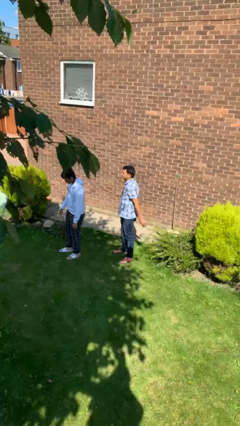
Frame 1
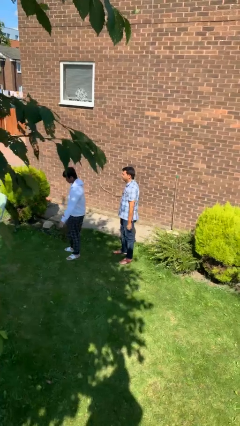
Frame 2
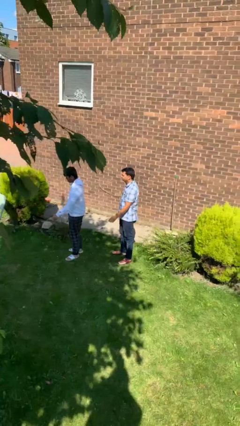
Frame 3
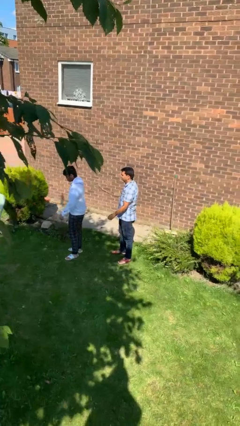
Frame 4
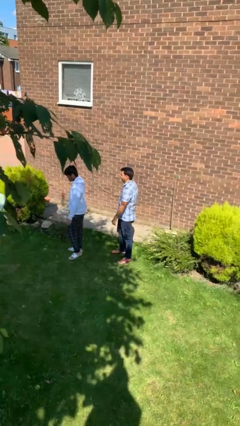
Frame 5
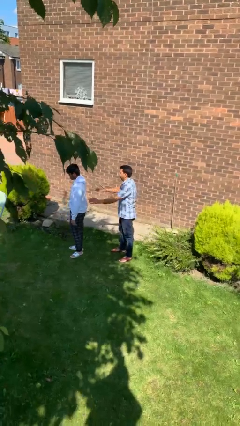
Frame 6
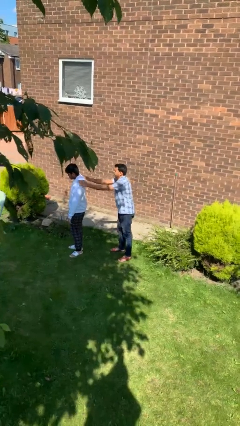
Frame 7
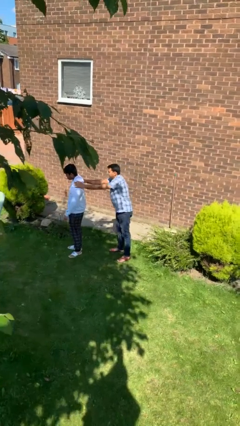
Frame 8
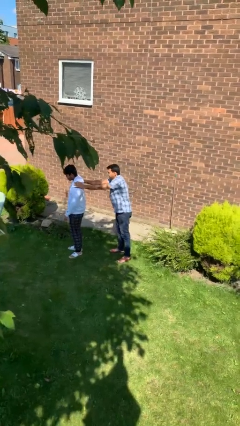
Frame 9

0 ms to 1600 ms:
person grabs person by shoulder

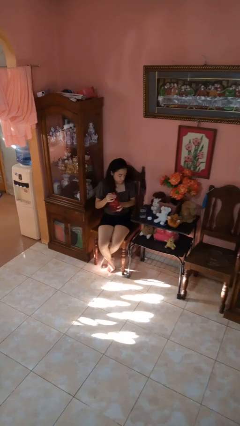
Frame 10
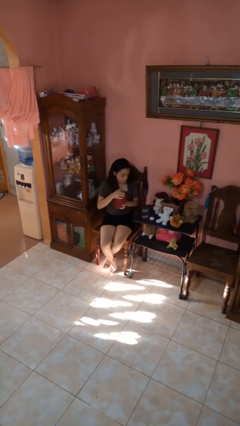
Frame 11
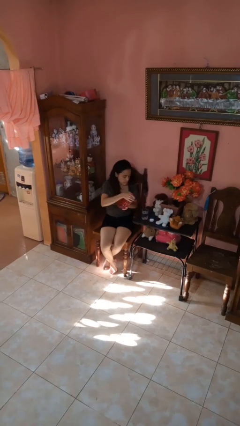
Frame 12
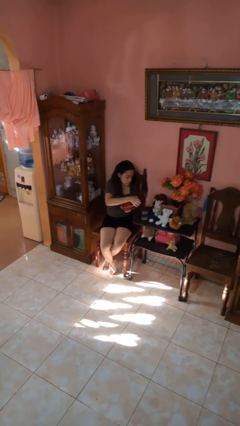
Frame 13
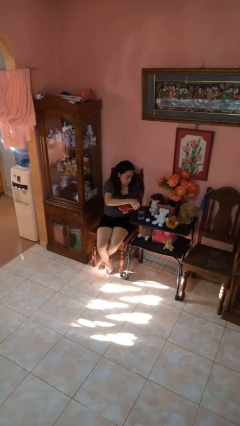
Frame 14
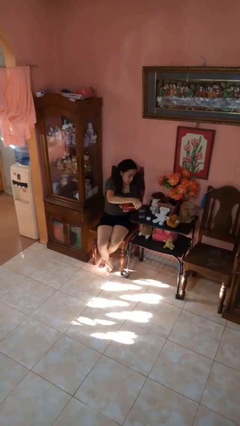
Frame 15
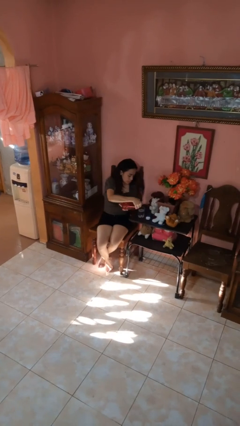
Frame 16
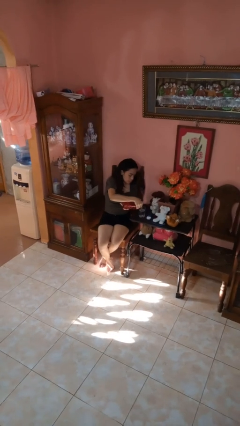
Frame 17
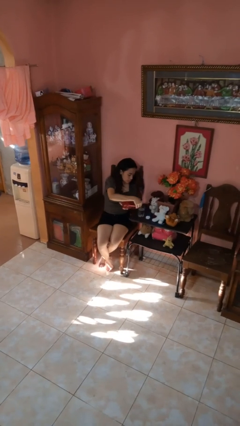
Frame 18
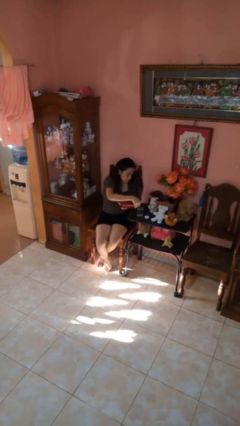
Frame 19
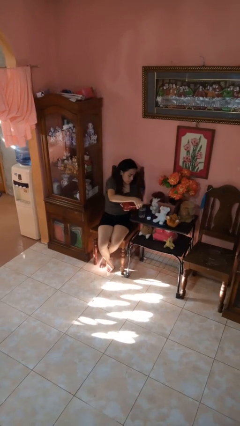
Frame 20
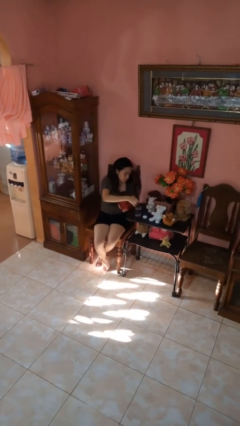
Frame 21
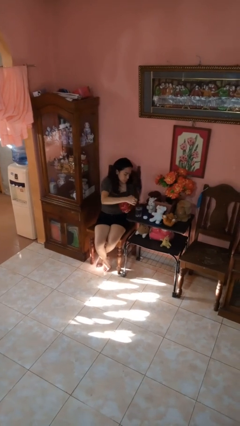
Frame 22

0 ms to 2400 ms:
person pours liquid into cup

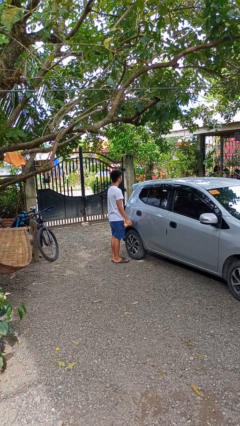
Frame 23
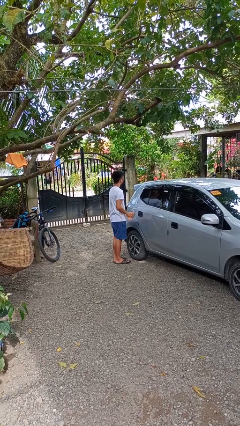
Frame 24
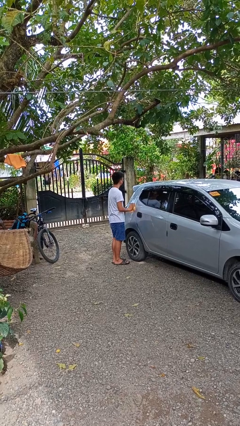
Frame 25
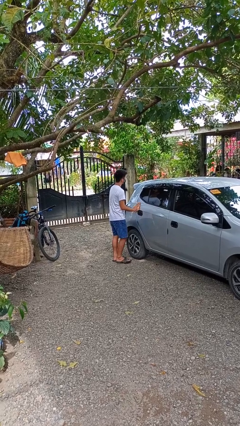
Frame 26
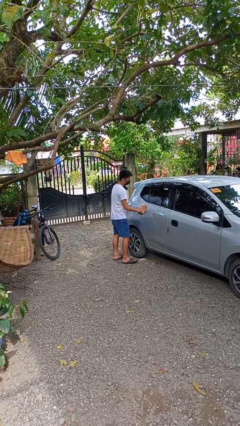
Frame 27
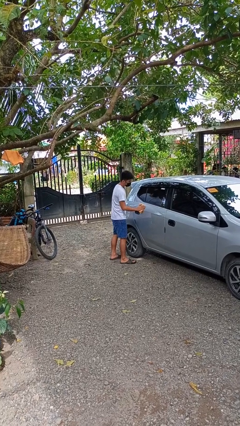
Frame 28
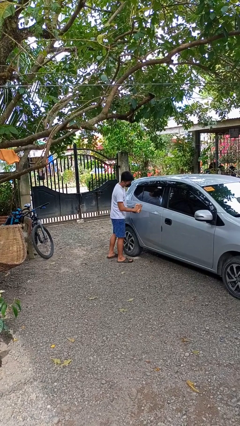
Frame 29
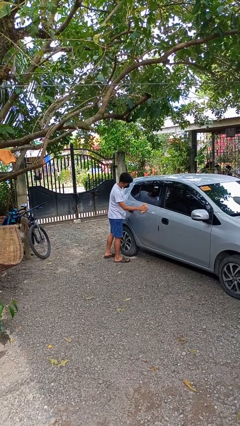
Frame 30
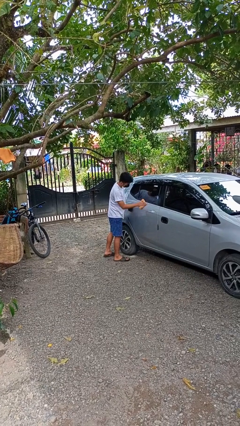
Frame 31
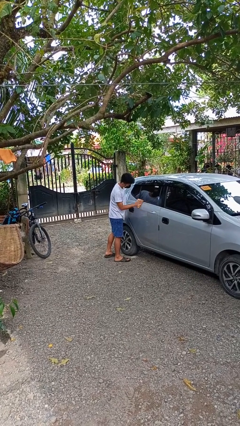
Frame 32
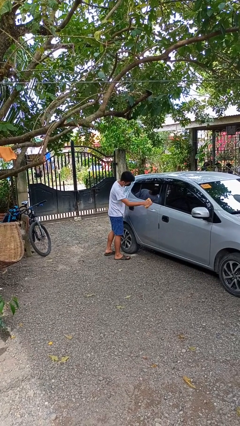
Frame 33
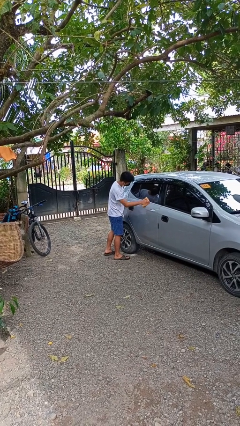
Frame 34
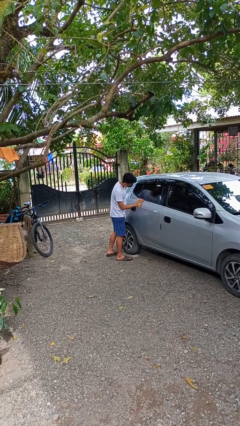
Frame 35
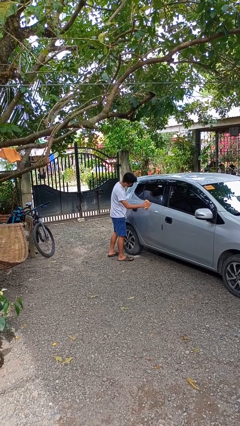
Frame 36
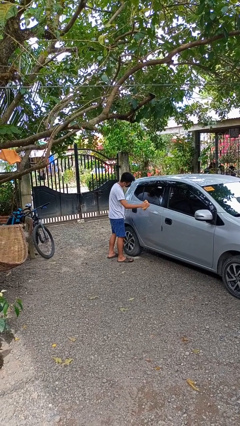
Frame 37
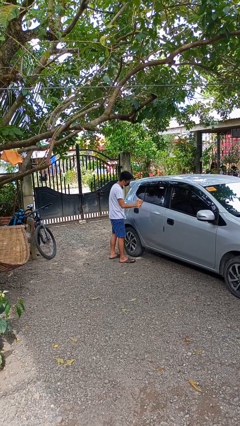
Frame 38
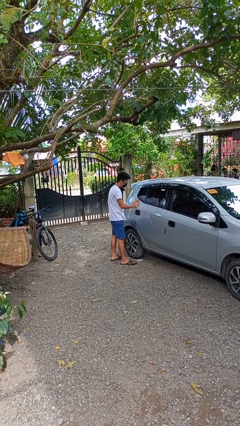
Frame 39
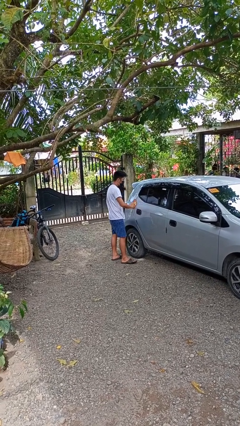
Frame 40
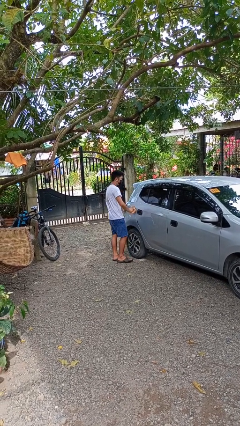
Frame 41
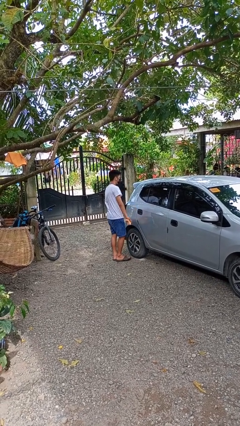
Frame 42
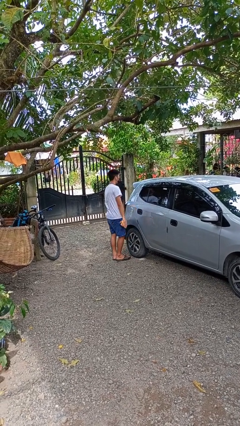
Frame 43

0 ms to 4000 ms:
person polishes car with rag

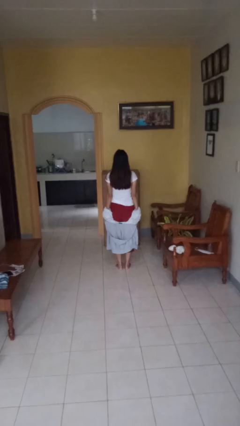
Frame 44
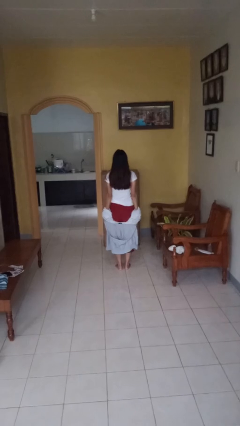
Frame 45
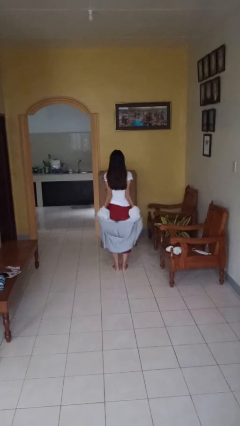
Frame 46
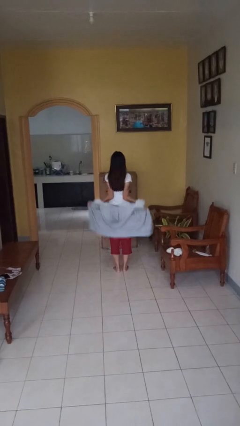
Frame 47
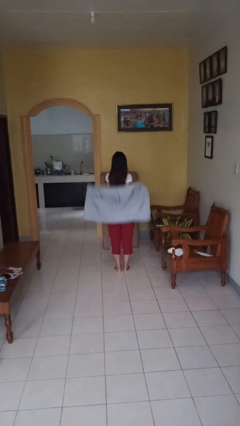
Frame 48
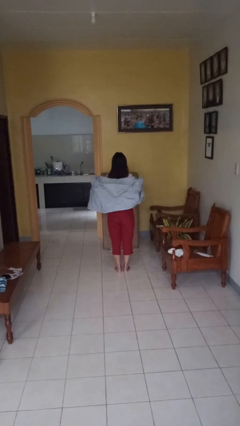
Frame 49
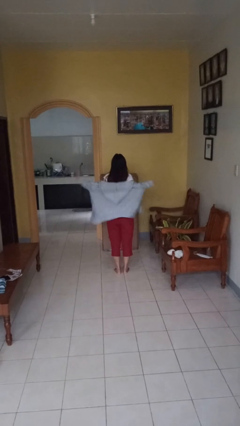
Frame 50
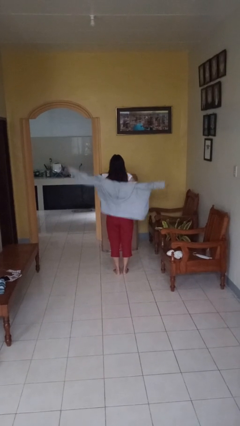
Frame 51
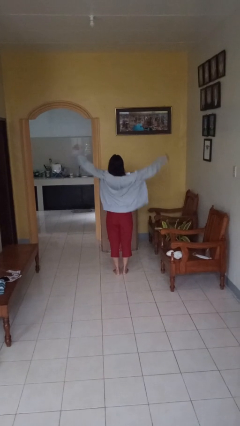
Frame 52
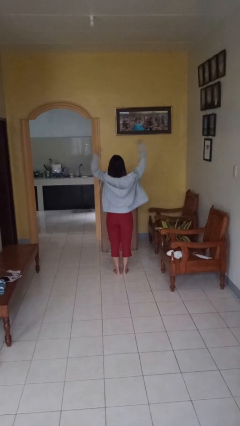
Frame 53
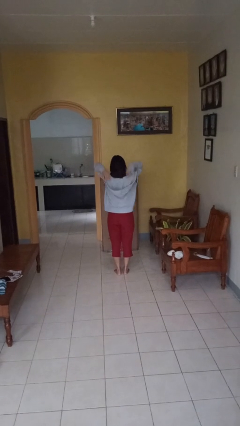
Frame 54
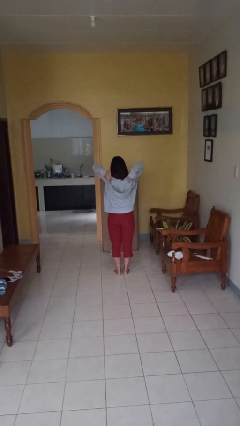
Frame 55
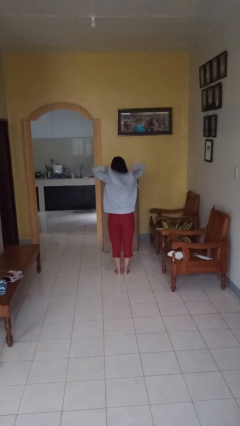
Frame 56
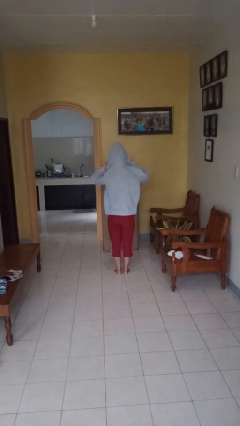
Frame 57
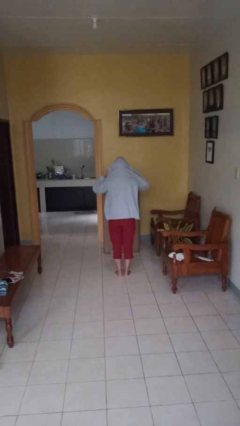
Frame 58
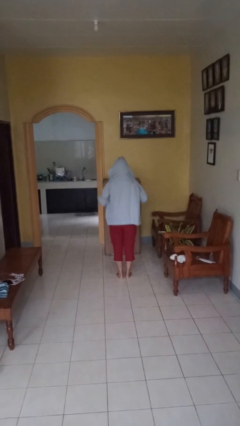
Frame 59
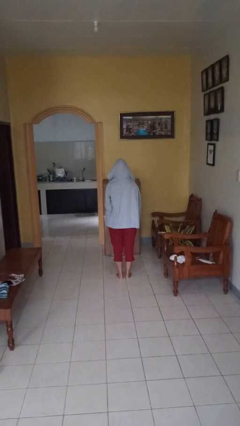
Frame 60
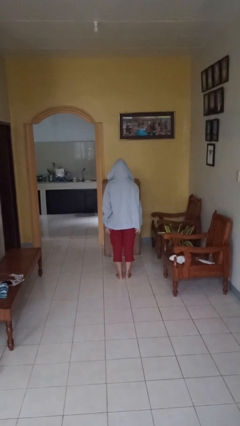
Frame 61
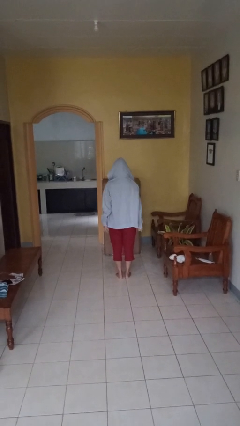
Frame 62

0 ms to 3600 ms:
person puts on hoodie

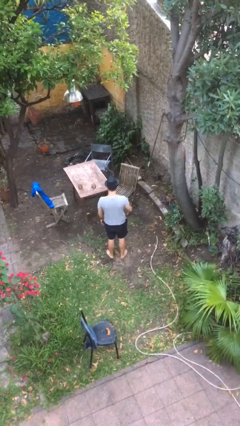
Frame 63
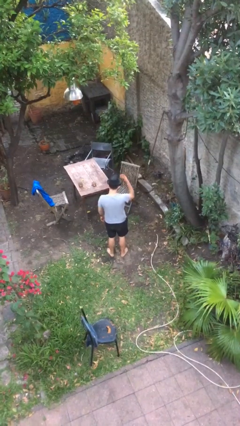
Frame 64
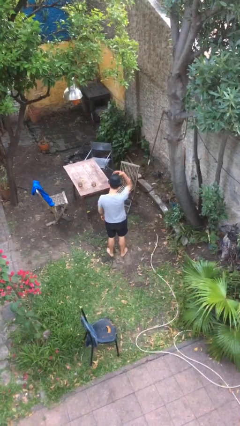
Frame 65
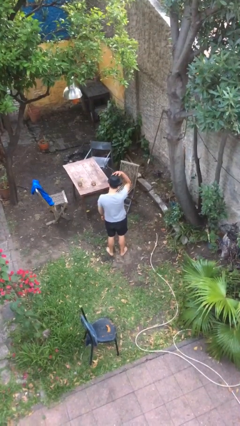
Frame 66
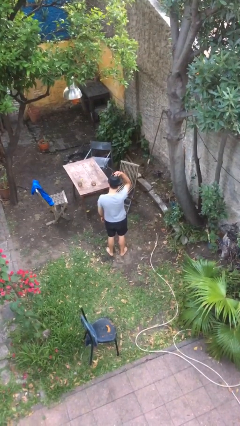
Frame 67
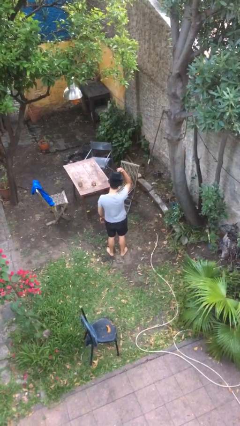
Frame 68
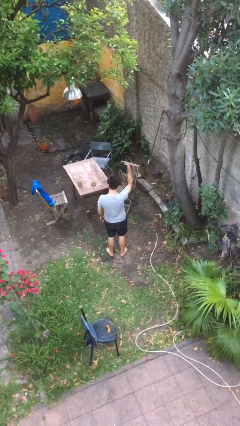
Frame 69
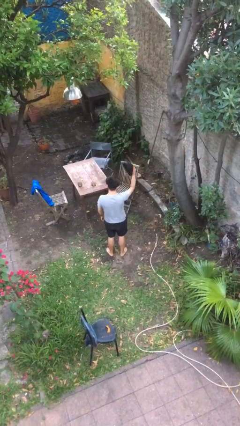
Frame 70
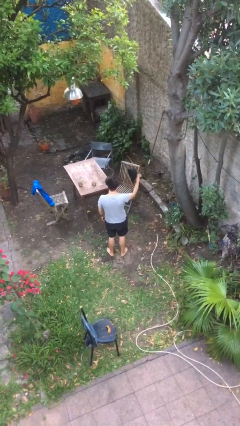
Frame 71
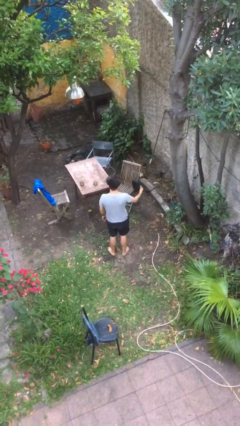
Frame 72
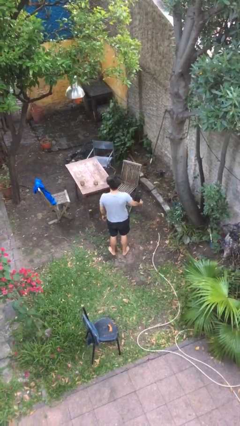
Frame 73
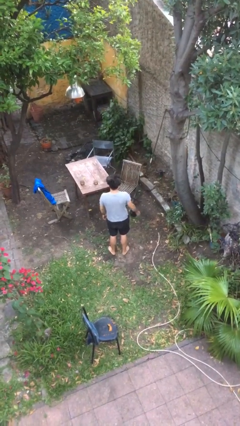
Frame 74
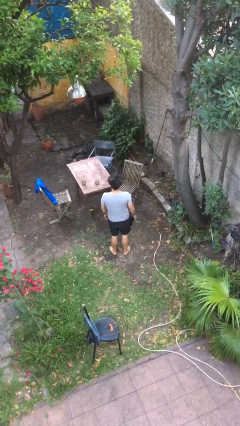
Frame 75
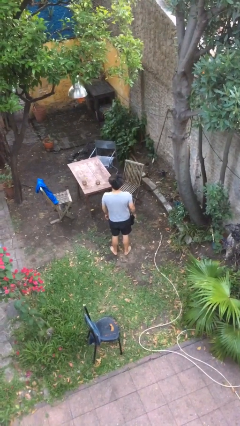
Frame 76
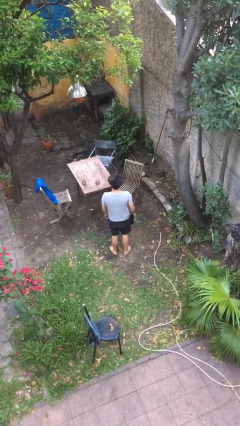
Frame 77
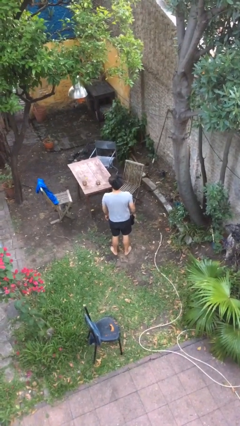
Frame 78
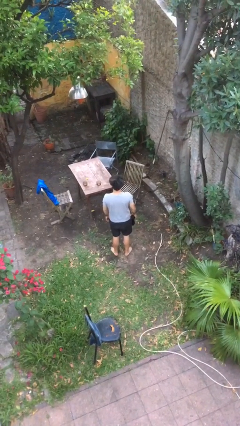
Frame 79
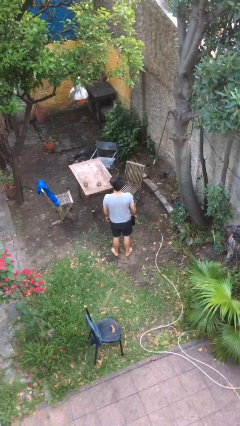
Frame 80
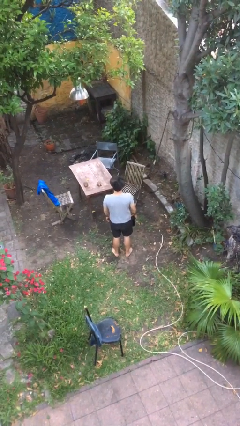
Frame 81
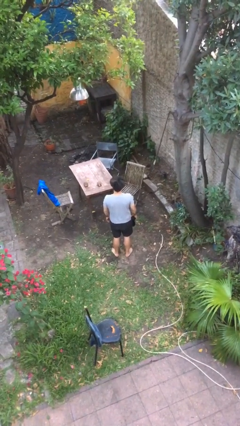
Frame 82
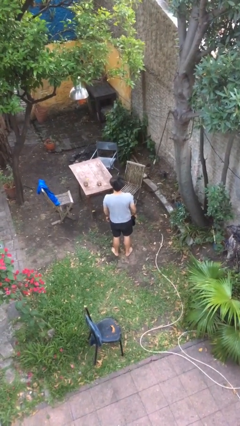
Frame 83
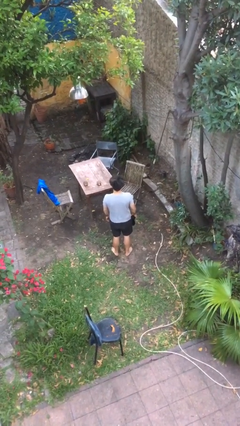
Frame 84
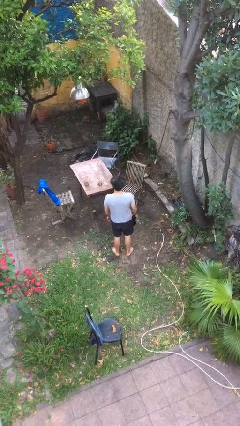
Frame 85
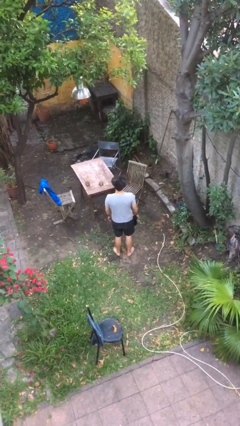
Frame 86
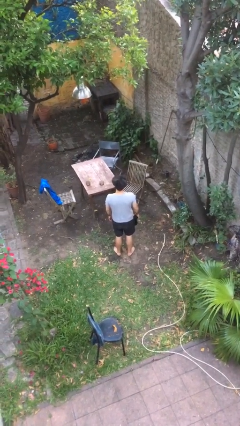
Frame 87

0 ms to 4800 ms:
person takes off hat

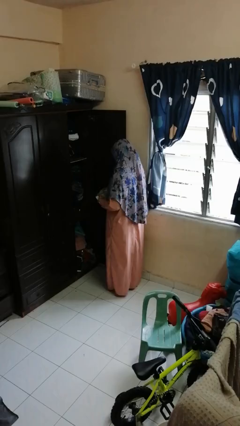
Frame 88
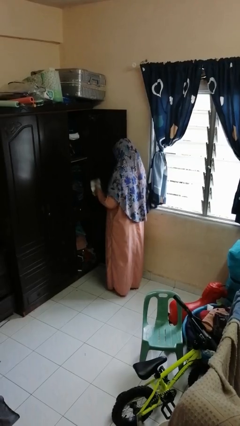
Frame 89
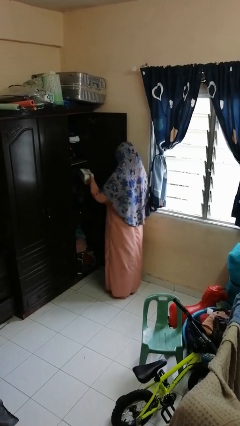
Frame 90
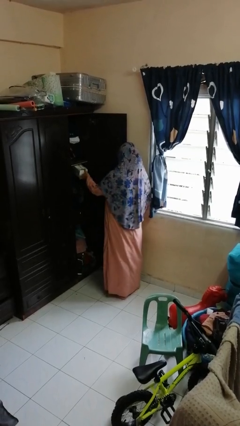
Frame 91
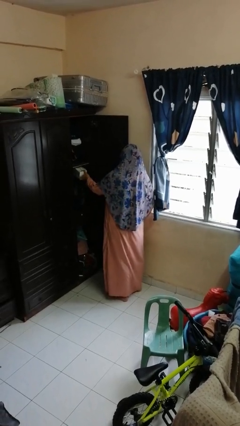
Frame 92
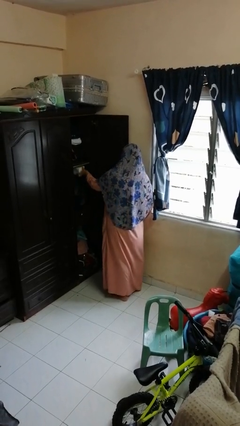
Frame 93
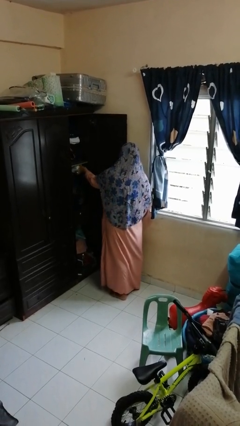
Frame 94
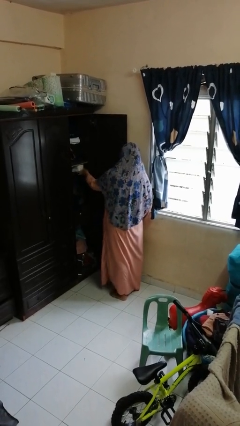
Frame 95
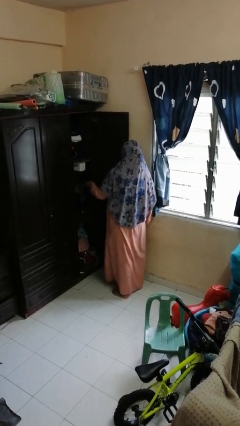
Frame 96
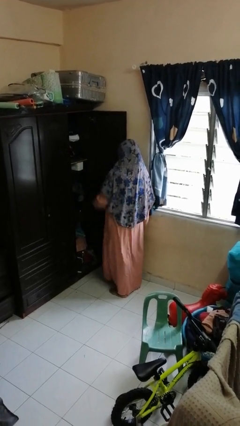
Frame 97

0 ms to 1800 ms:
person puts down object into cabinet
